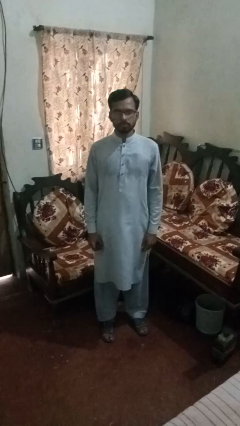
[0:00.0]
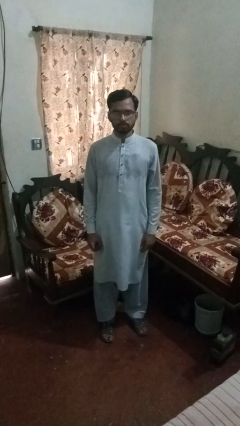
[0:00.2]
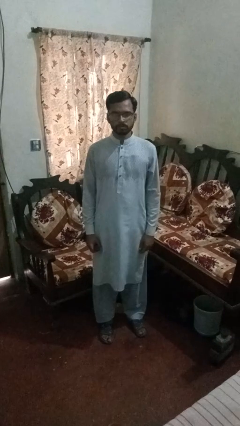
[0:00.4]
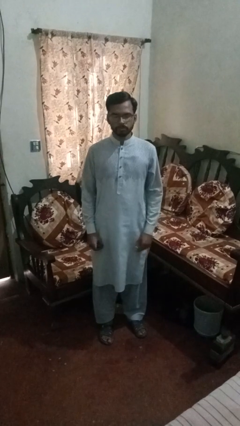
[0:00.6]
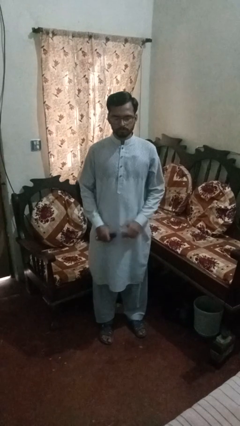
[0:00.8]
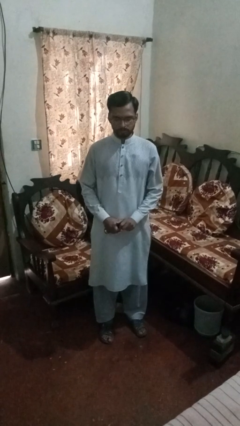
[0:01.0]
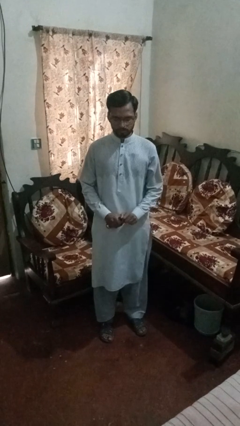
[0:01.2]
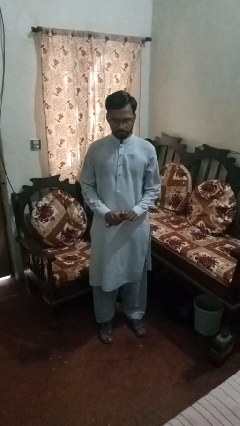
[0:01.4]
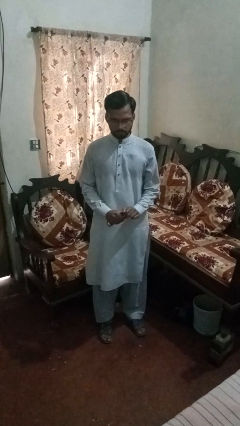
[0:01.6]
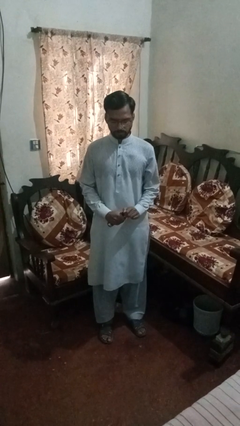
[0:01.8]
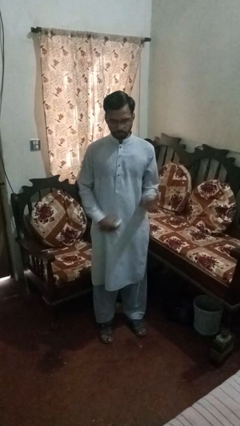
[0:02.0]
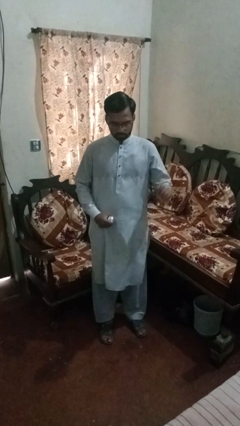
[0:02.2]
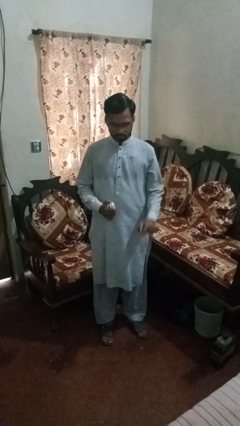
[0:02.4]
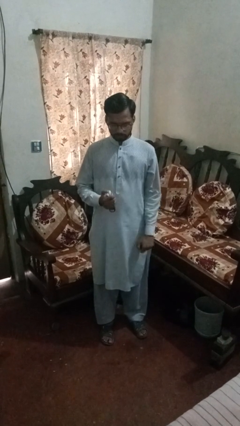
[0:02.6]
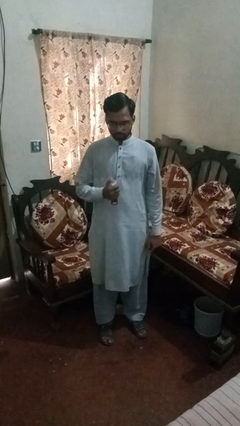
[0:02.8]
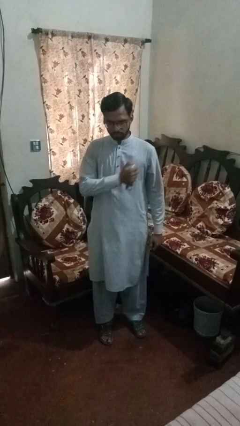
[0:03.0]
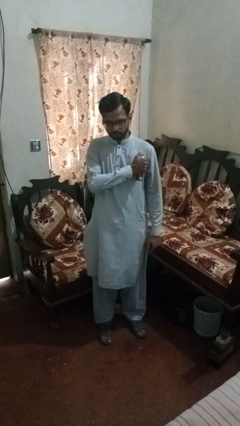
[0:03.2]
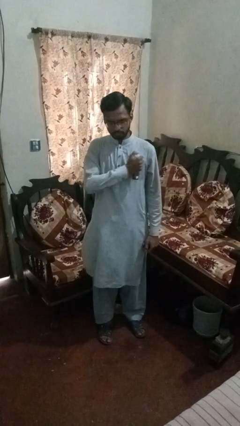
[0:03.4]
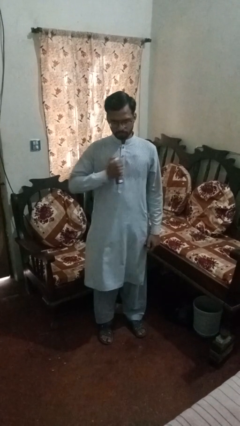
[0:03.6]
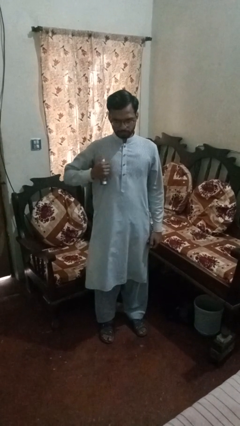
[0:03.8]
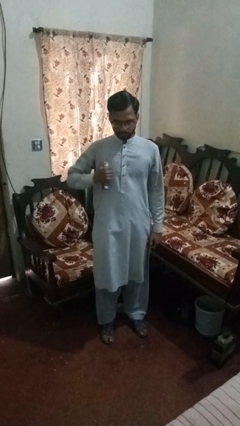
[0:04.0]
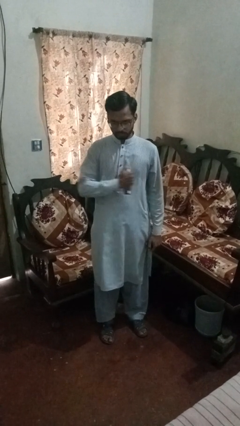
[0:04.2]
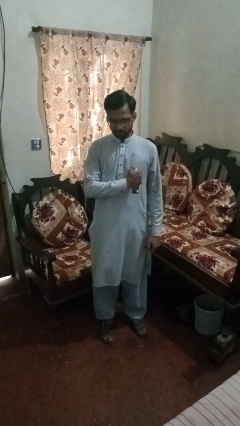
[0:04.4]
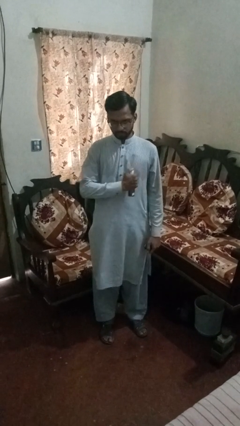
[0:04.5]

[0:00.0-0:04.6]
person applies deodorant

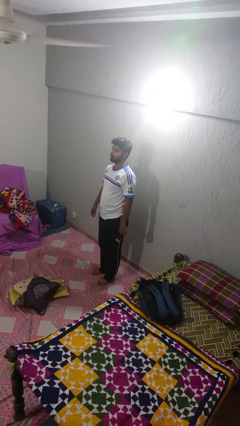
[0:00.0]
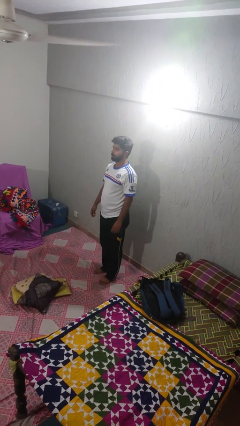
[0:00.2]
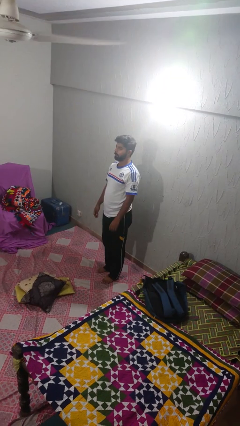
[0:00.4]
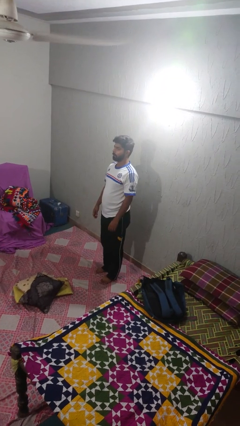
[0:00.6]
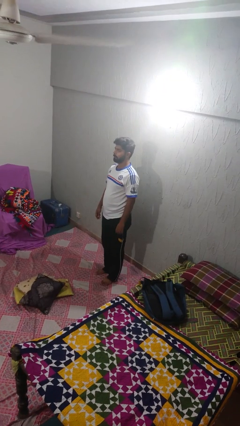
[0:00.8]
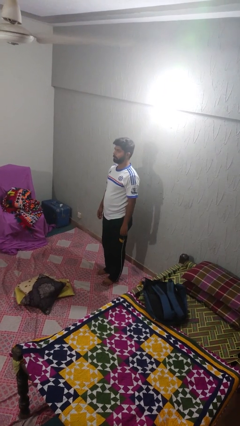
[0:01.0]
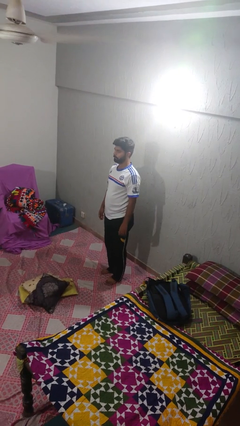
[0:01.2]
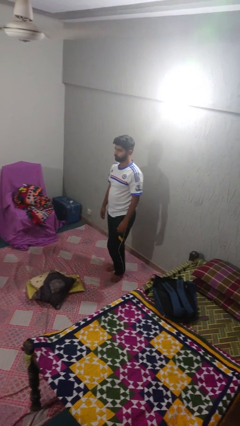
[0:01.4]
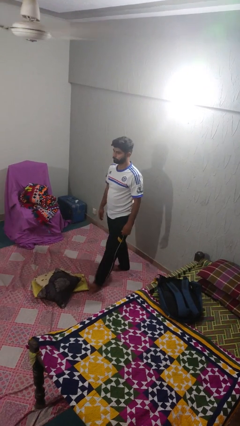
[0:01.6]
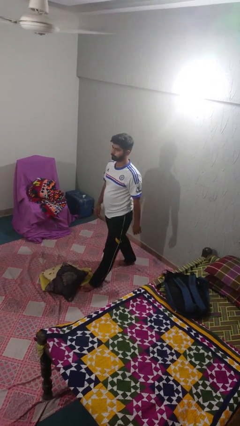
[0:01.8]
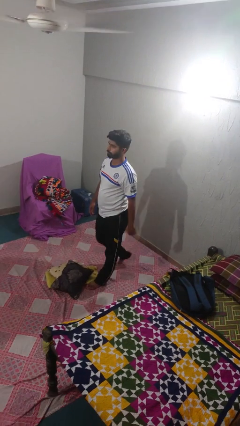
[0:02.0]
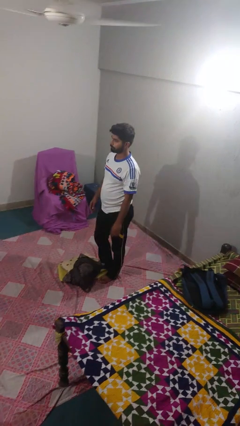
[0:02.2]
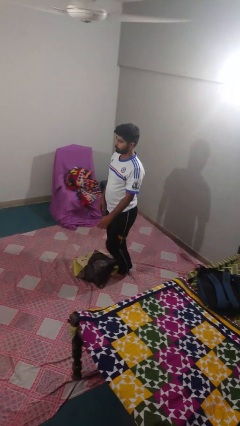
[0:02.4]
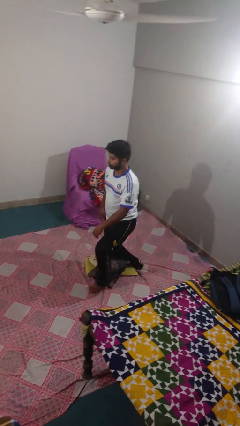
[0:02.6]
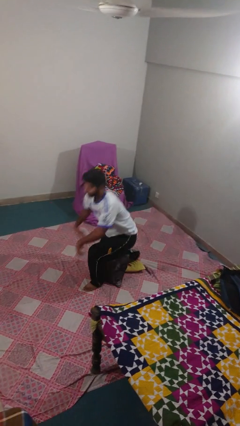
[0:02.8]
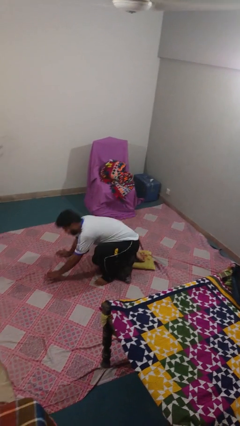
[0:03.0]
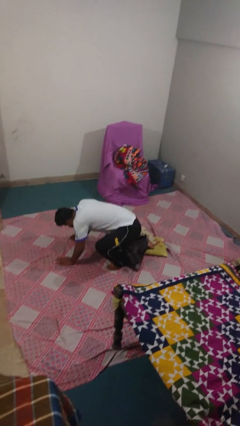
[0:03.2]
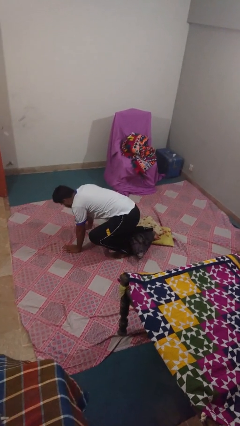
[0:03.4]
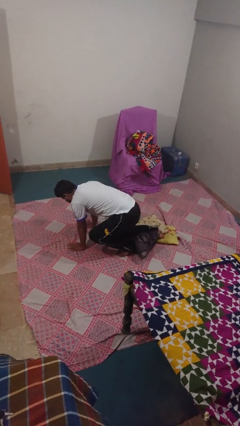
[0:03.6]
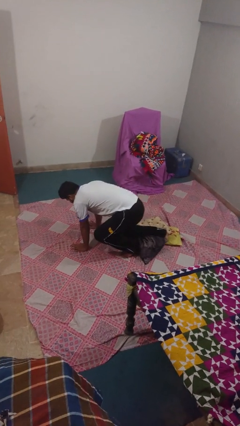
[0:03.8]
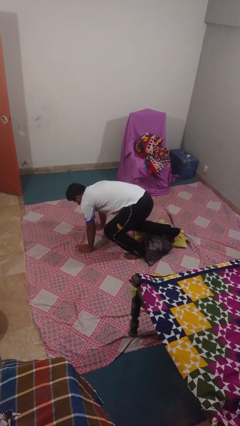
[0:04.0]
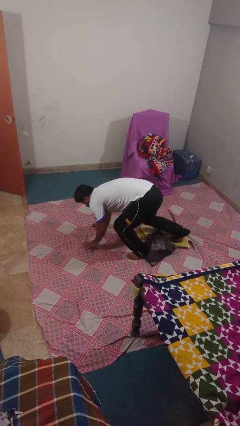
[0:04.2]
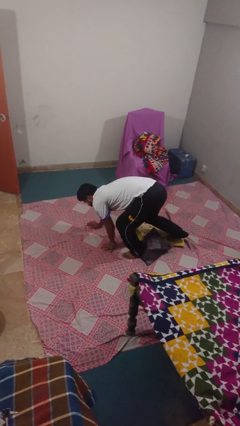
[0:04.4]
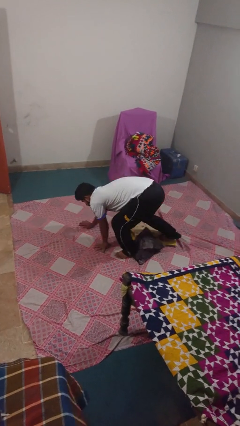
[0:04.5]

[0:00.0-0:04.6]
person trips on object on floor

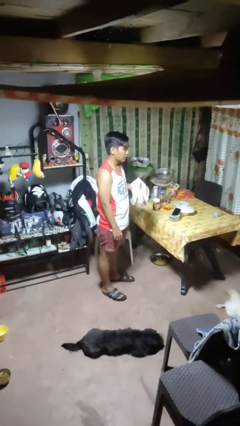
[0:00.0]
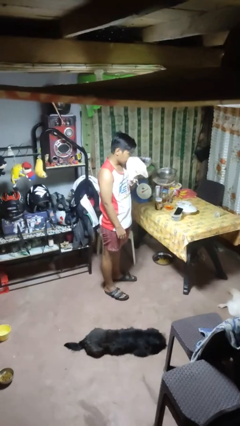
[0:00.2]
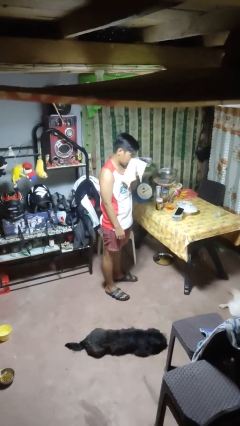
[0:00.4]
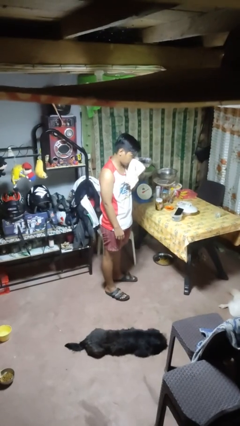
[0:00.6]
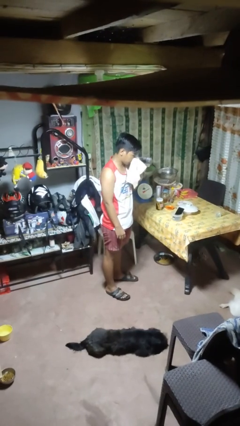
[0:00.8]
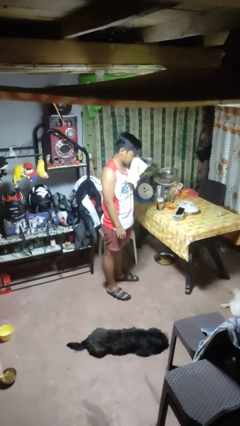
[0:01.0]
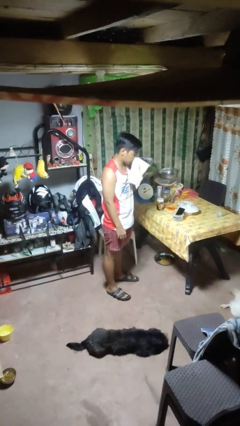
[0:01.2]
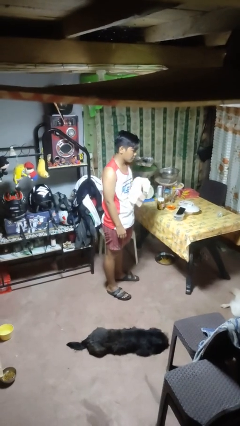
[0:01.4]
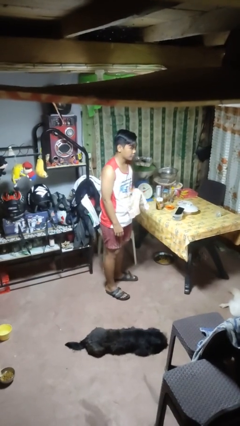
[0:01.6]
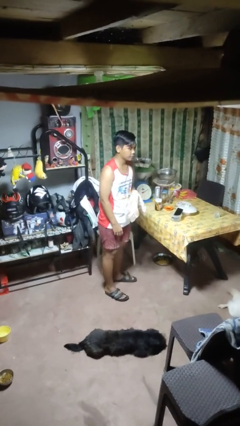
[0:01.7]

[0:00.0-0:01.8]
person blows nose

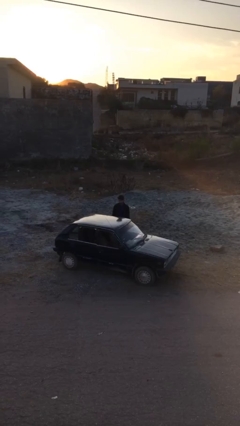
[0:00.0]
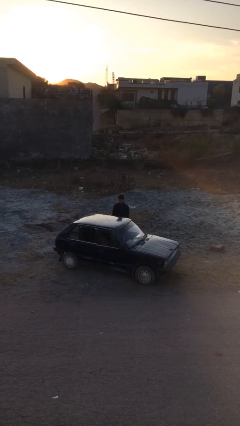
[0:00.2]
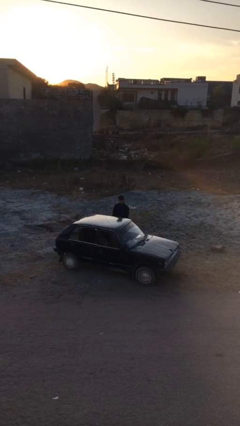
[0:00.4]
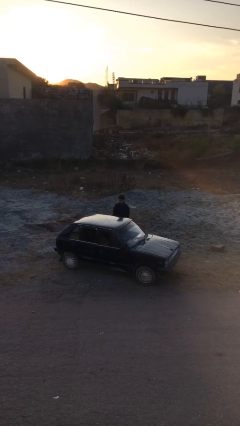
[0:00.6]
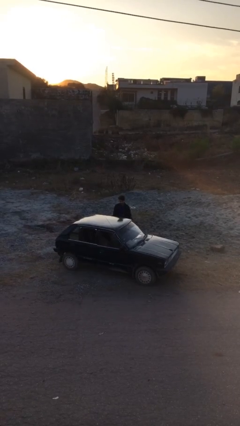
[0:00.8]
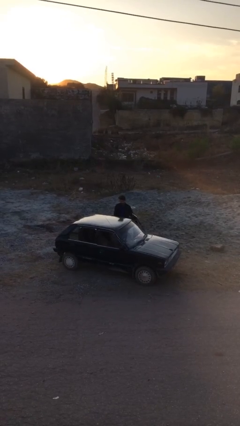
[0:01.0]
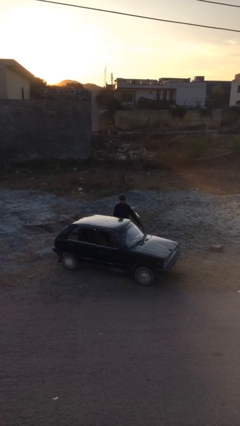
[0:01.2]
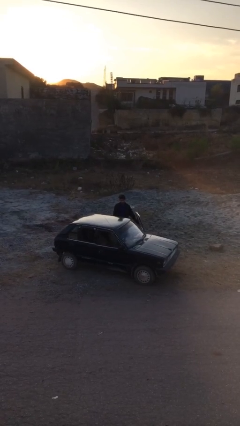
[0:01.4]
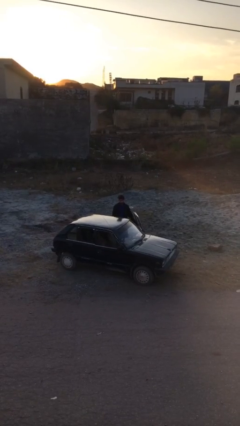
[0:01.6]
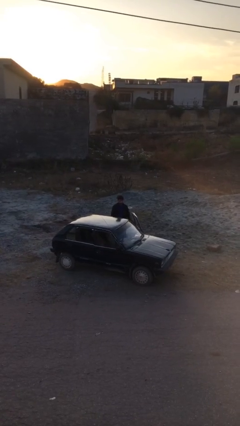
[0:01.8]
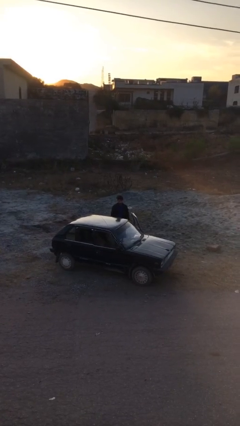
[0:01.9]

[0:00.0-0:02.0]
person opens car door

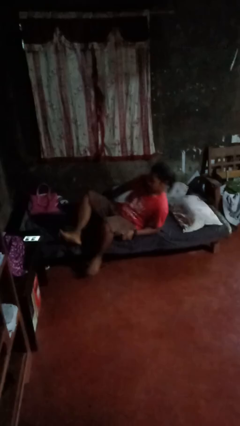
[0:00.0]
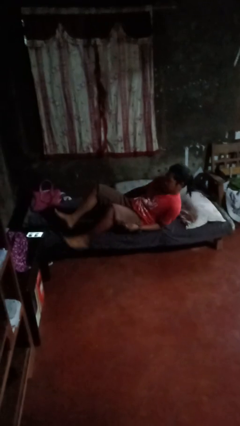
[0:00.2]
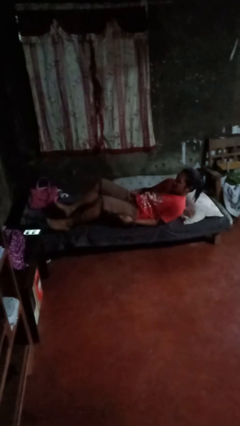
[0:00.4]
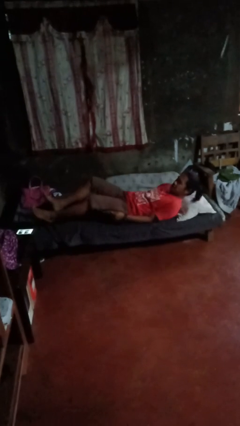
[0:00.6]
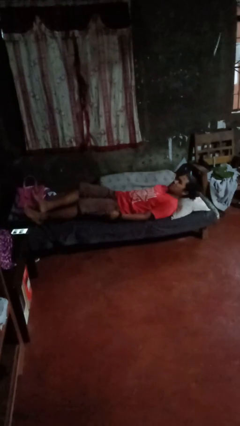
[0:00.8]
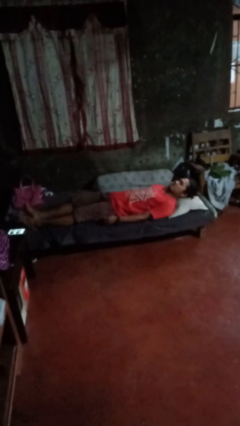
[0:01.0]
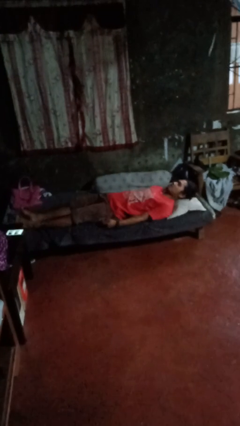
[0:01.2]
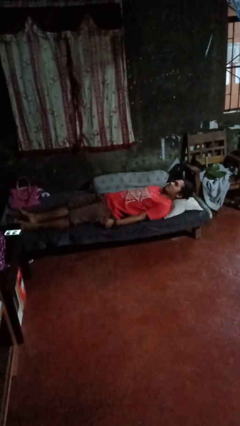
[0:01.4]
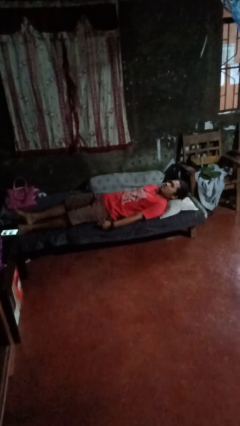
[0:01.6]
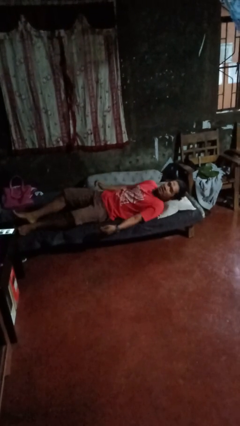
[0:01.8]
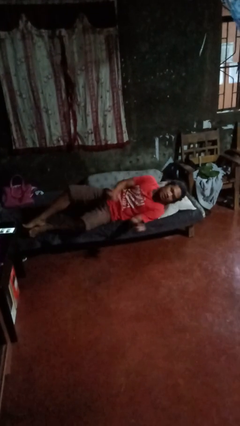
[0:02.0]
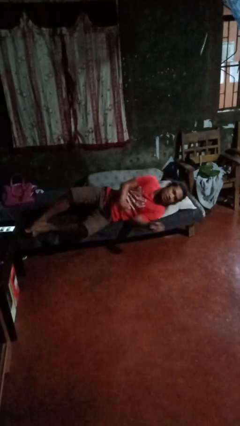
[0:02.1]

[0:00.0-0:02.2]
person lies down on bed

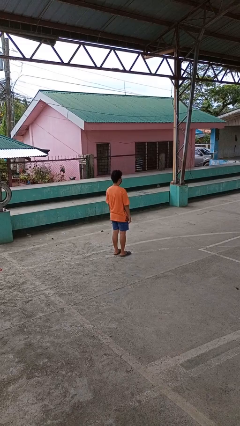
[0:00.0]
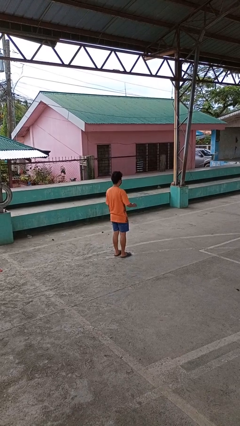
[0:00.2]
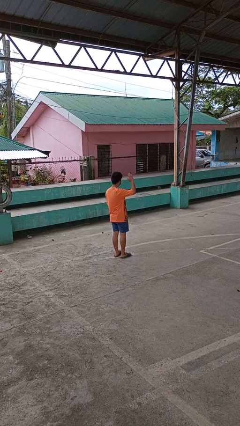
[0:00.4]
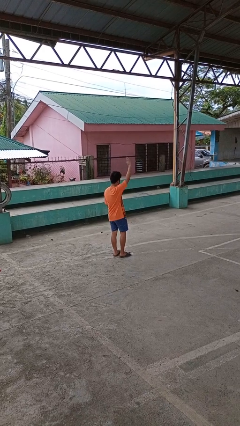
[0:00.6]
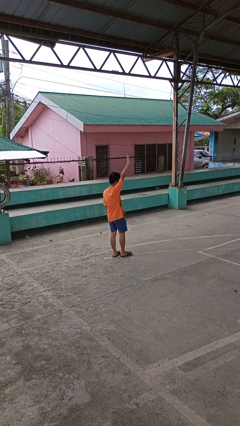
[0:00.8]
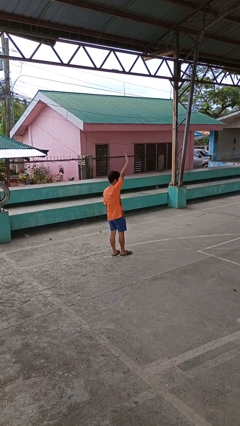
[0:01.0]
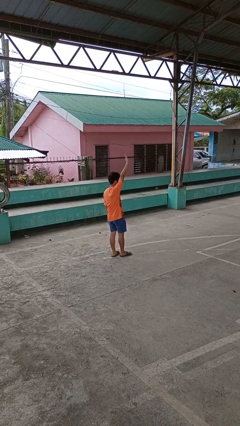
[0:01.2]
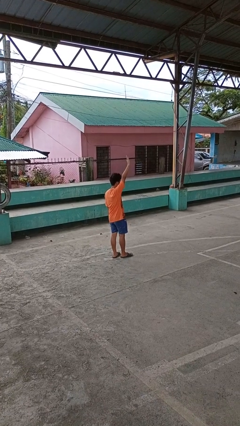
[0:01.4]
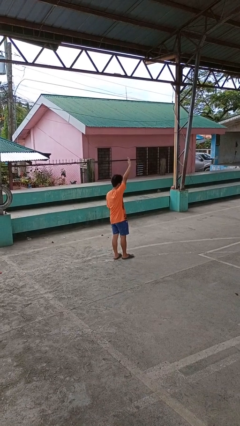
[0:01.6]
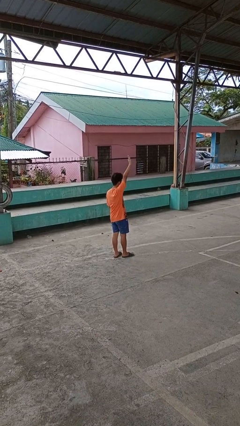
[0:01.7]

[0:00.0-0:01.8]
person gestures raise hand

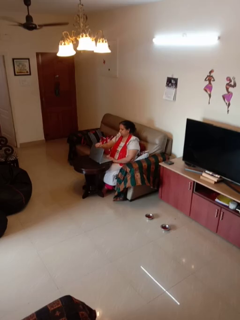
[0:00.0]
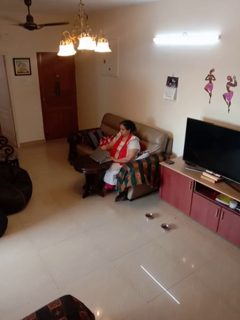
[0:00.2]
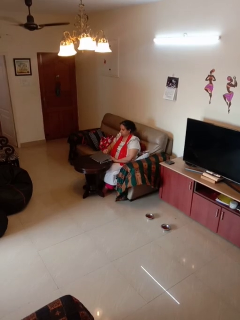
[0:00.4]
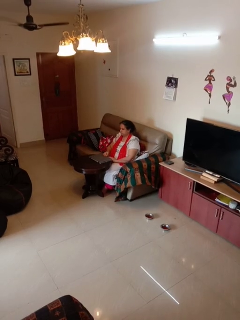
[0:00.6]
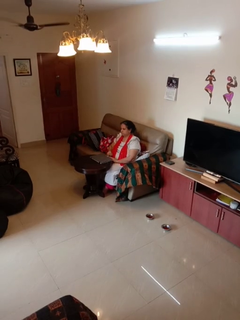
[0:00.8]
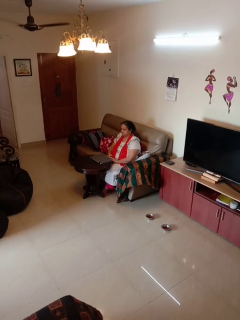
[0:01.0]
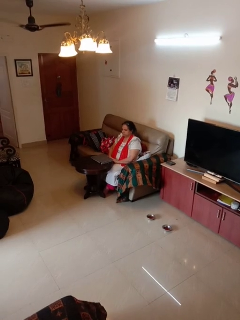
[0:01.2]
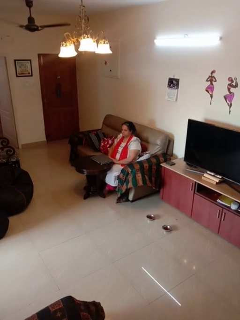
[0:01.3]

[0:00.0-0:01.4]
person closes laptop
